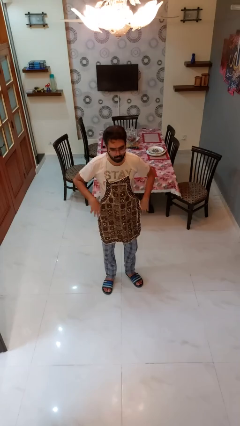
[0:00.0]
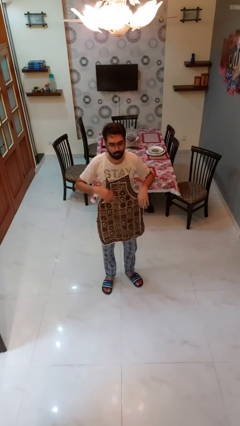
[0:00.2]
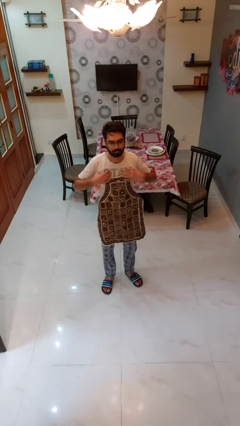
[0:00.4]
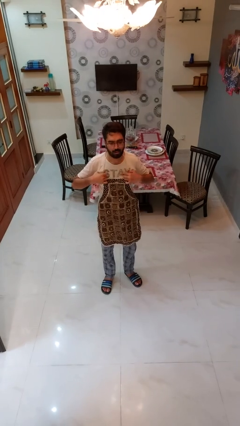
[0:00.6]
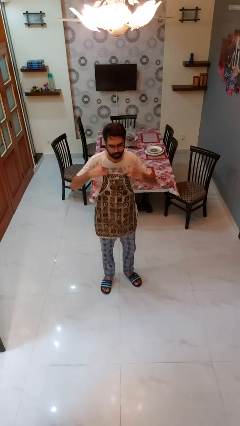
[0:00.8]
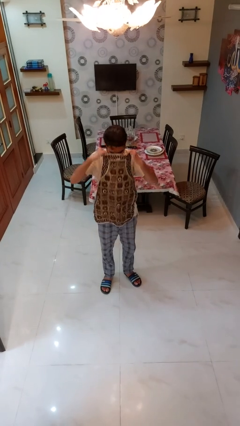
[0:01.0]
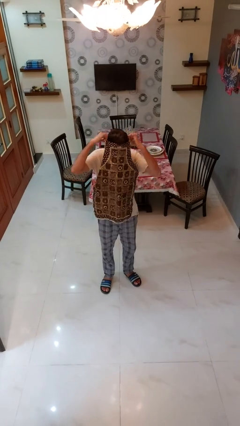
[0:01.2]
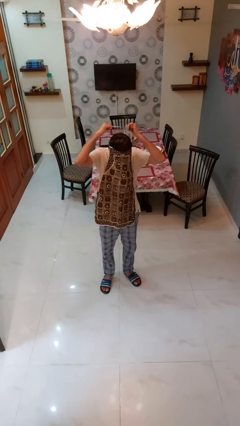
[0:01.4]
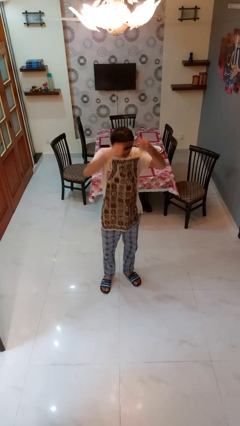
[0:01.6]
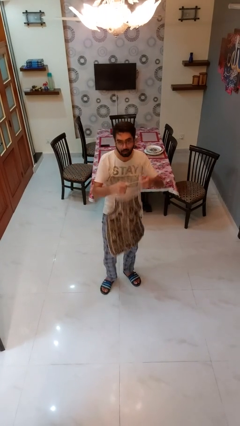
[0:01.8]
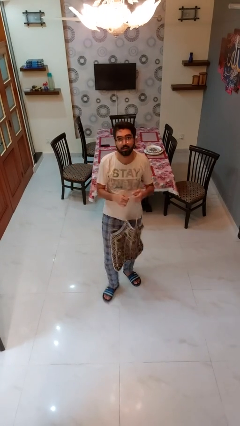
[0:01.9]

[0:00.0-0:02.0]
person takes off apron

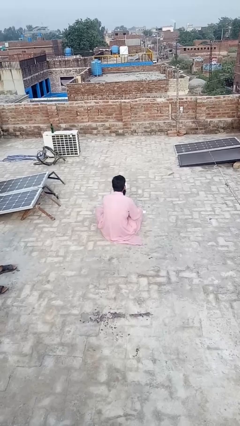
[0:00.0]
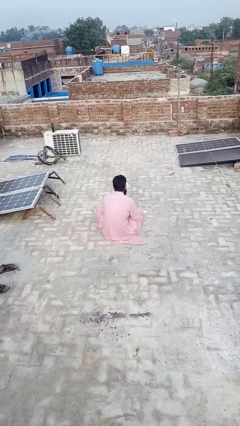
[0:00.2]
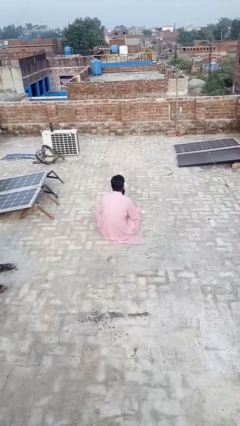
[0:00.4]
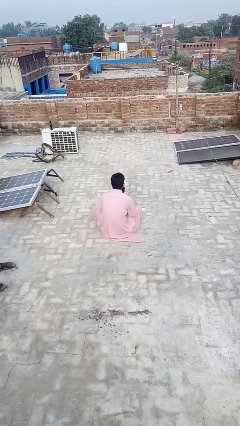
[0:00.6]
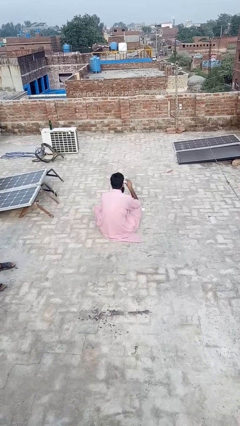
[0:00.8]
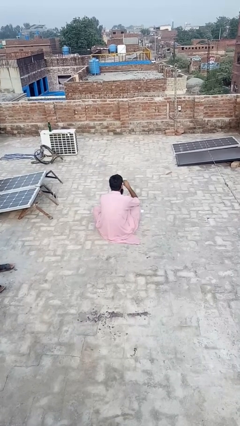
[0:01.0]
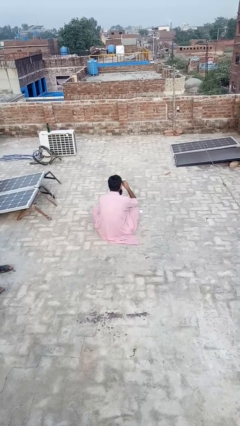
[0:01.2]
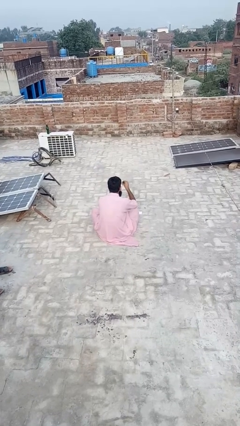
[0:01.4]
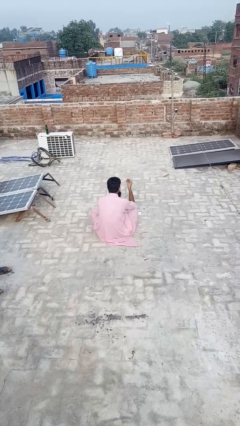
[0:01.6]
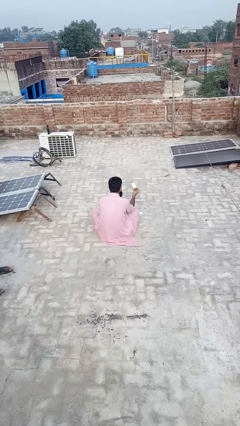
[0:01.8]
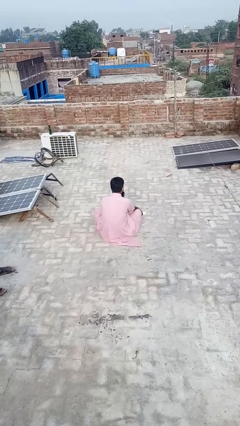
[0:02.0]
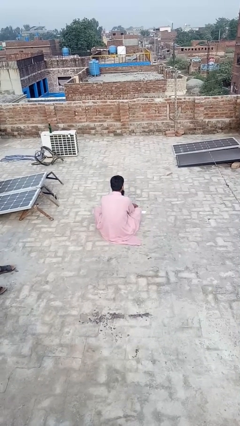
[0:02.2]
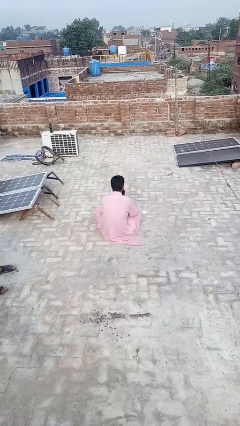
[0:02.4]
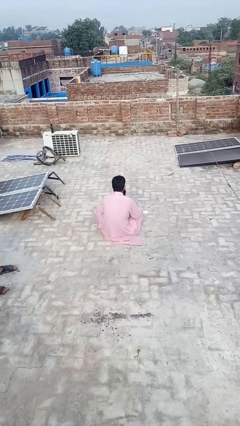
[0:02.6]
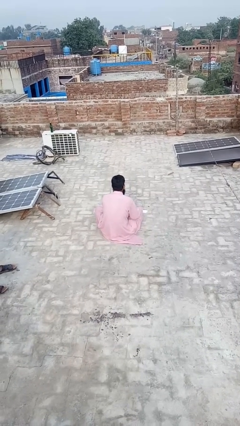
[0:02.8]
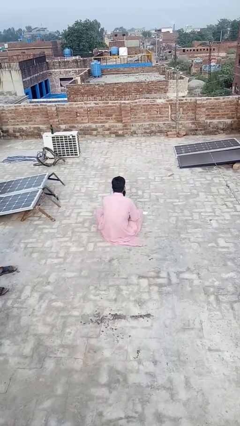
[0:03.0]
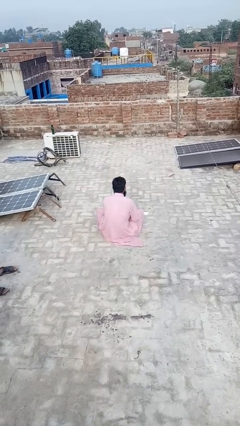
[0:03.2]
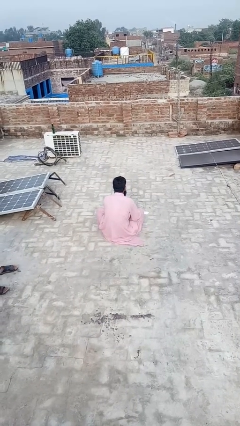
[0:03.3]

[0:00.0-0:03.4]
person discards trash

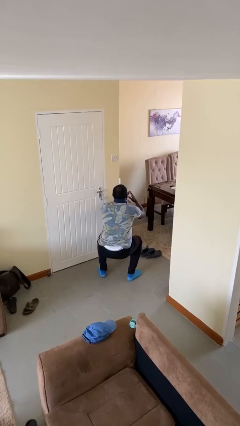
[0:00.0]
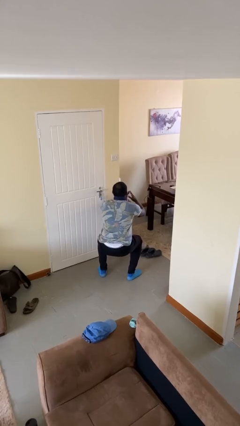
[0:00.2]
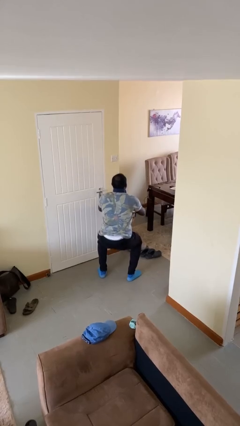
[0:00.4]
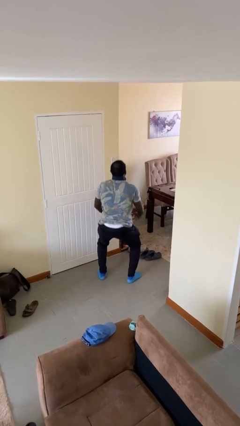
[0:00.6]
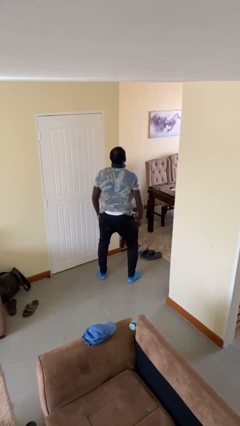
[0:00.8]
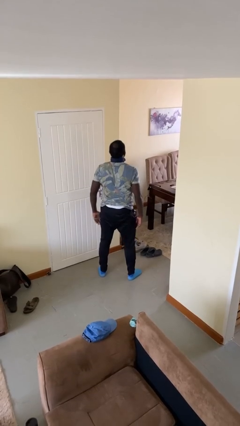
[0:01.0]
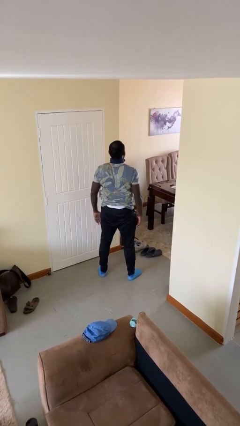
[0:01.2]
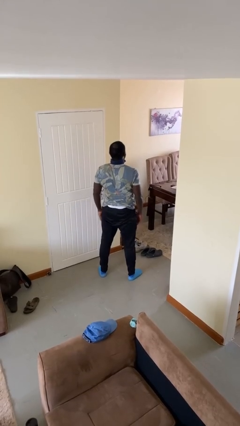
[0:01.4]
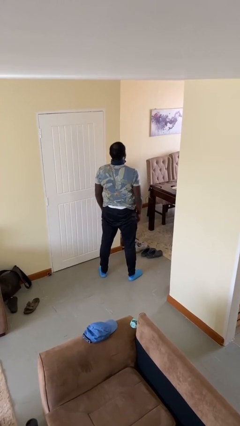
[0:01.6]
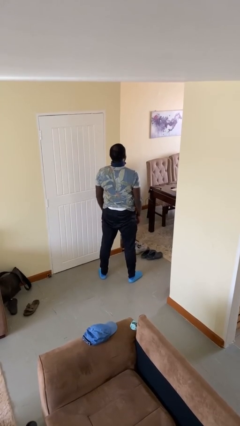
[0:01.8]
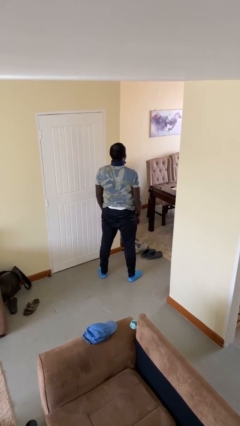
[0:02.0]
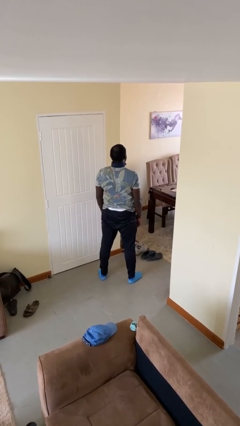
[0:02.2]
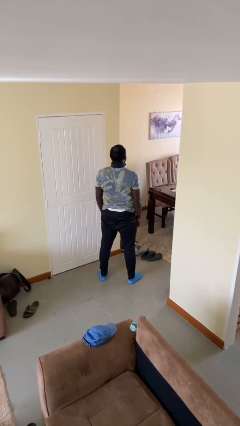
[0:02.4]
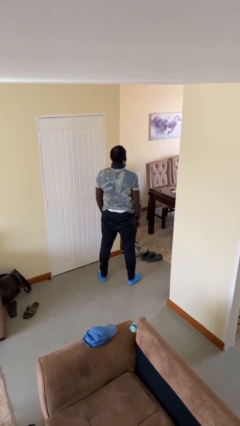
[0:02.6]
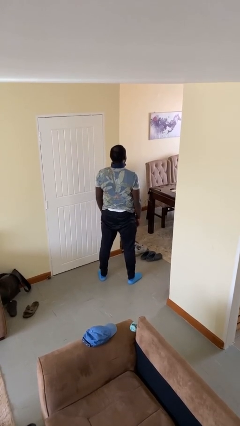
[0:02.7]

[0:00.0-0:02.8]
person stands up

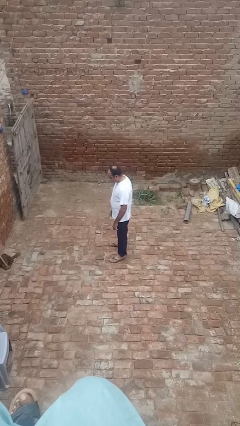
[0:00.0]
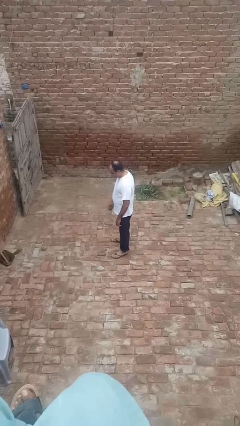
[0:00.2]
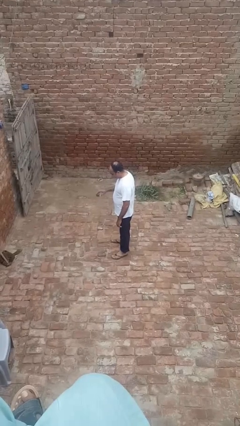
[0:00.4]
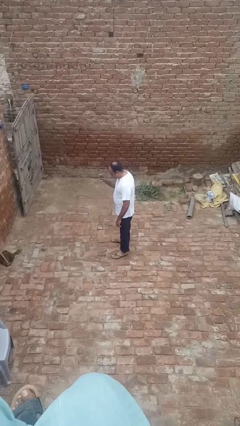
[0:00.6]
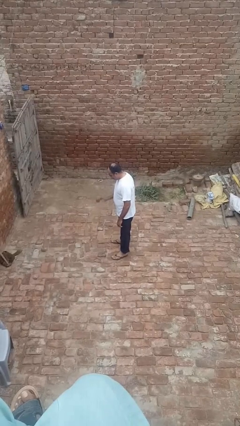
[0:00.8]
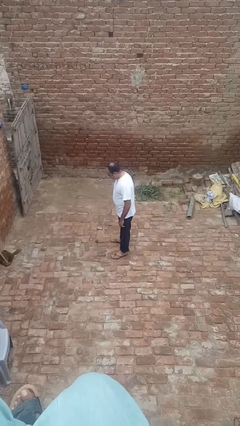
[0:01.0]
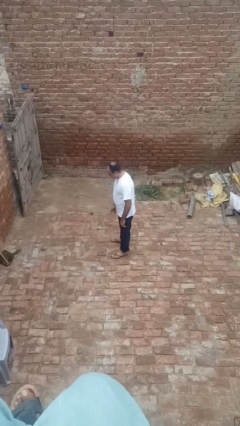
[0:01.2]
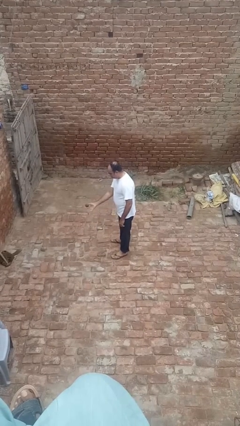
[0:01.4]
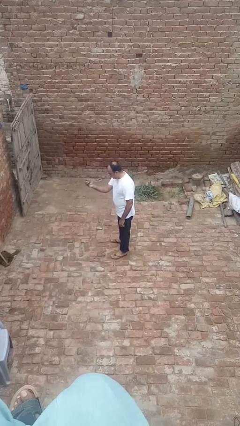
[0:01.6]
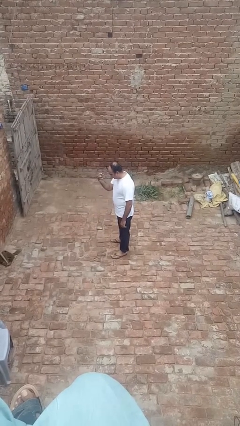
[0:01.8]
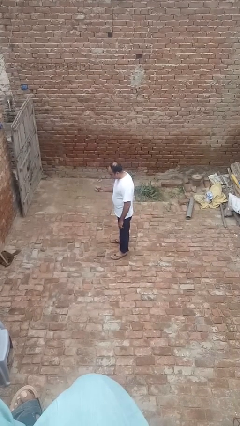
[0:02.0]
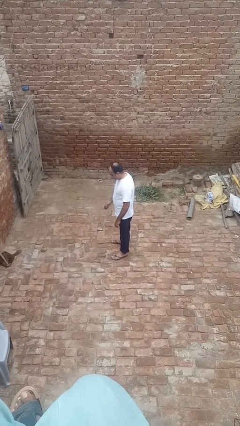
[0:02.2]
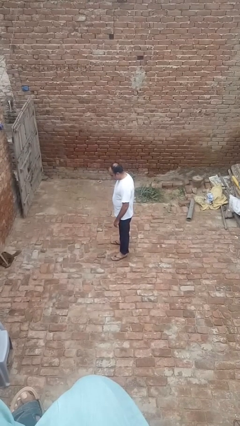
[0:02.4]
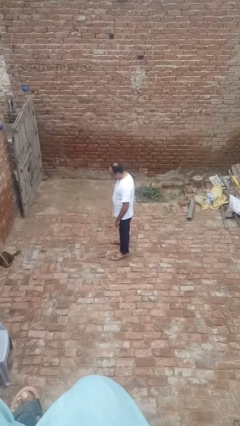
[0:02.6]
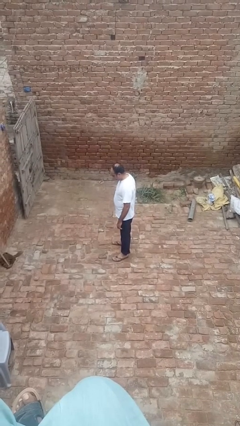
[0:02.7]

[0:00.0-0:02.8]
person bounces ball on floor

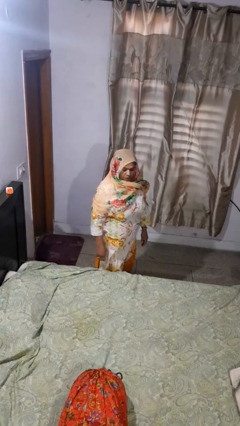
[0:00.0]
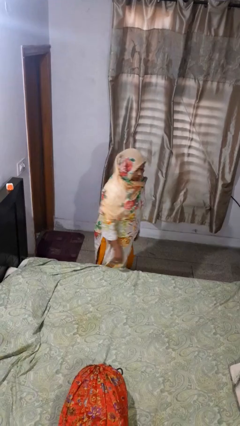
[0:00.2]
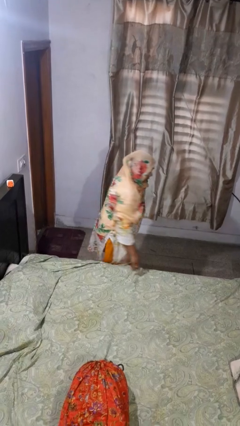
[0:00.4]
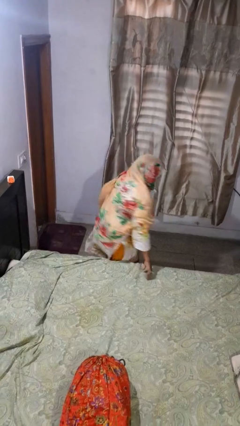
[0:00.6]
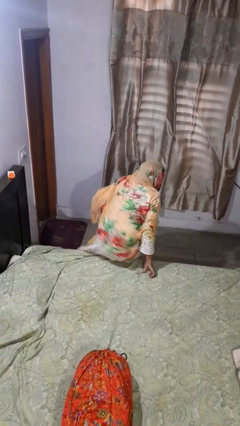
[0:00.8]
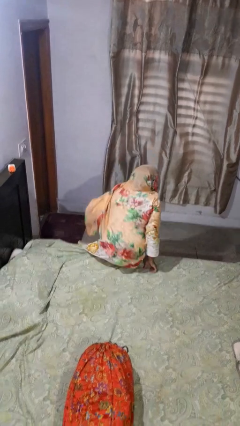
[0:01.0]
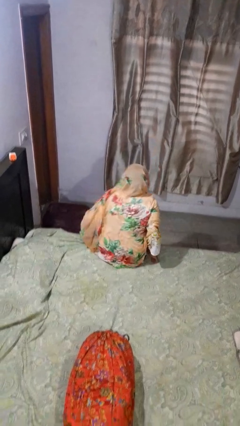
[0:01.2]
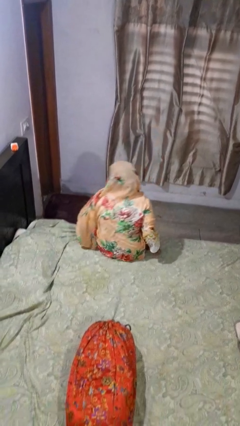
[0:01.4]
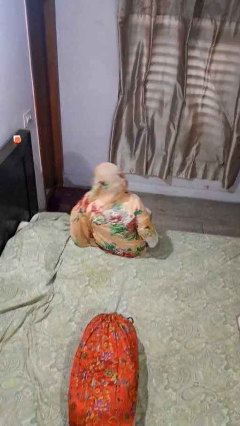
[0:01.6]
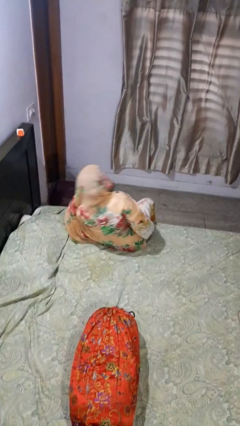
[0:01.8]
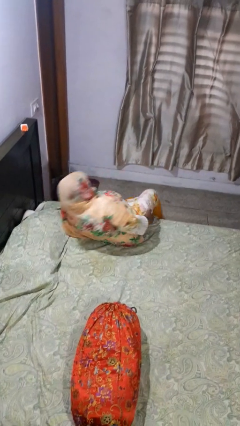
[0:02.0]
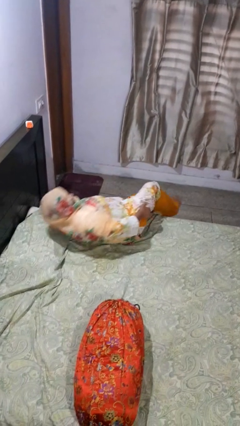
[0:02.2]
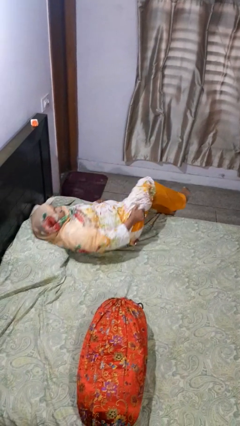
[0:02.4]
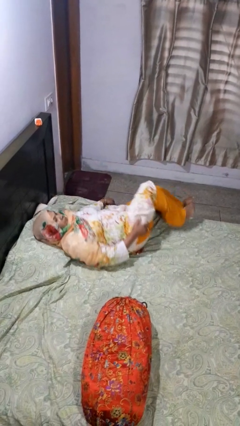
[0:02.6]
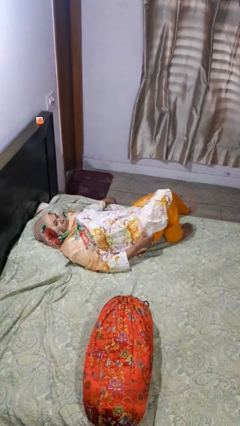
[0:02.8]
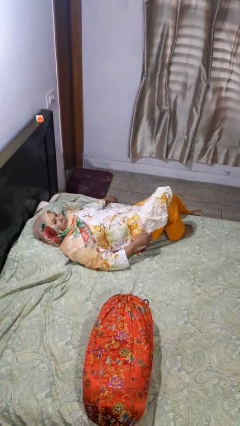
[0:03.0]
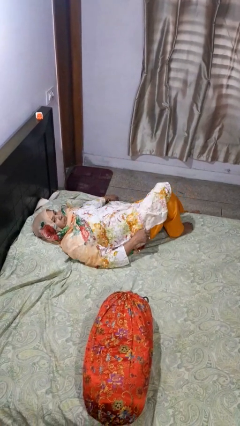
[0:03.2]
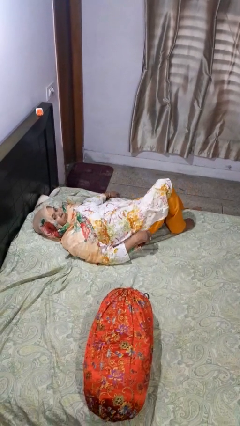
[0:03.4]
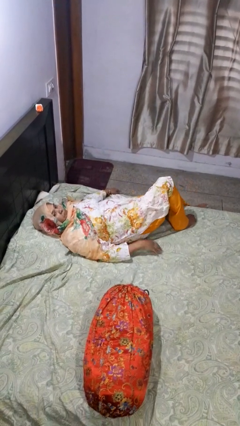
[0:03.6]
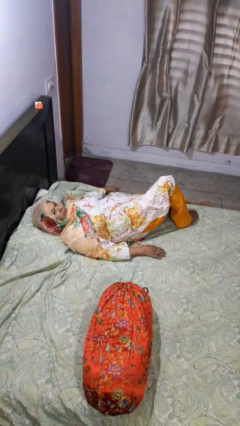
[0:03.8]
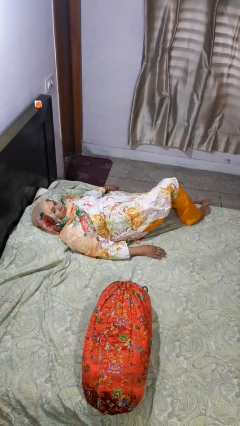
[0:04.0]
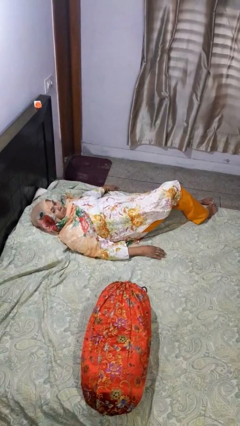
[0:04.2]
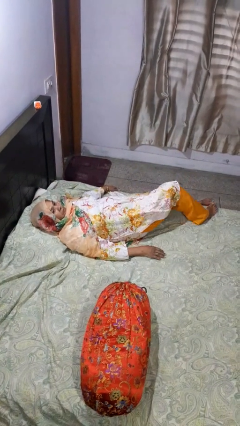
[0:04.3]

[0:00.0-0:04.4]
person lies down on bed

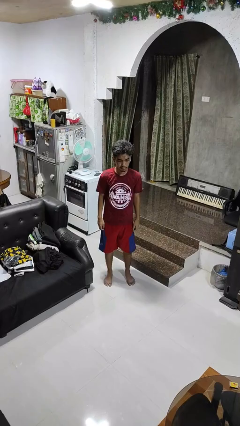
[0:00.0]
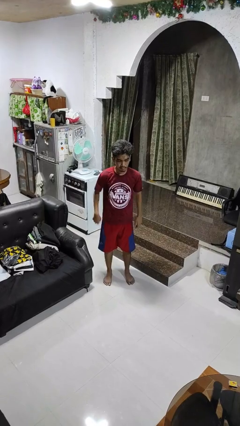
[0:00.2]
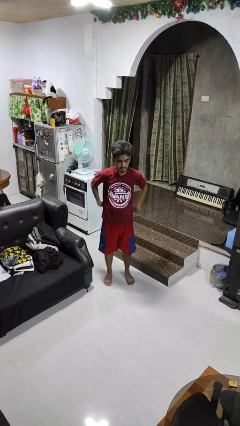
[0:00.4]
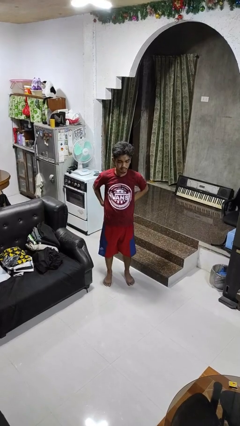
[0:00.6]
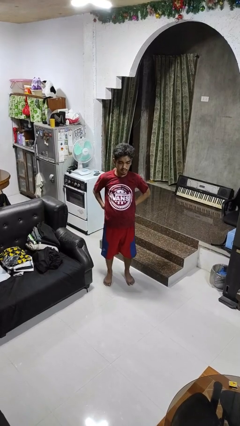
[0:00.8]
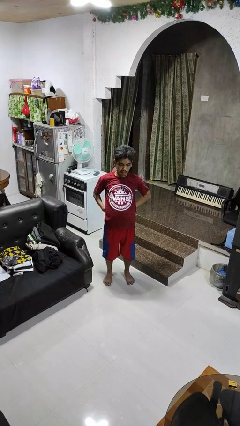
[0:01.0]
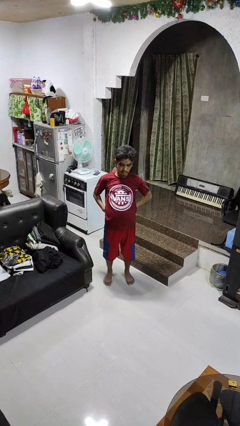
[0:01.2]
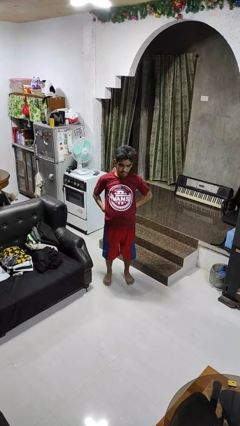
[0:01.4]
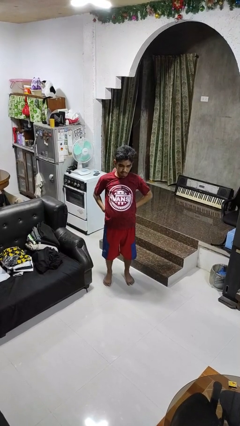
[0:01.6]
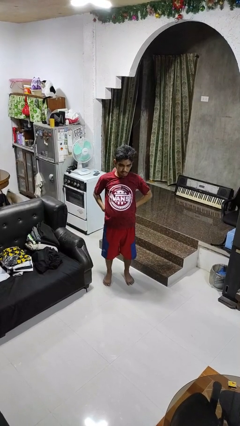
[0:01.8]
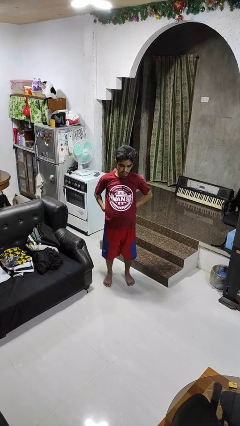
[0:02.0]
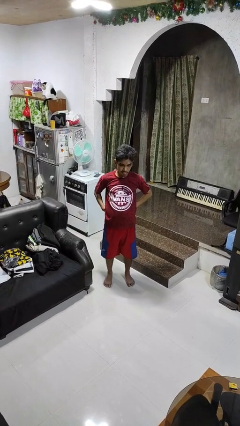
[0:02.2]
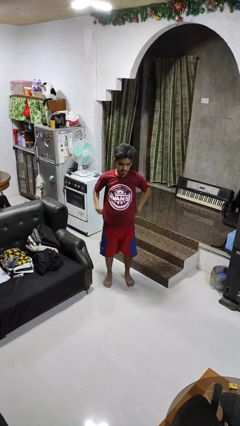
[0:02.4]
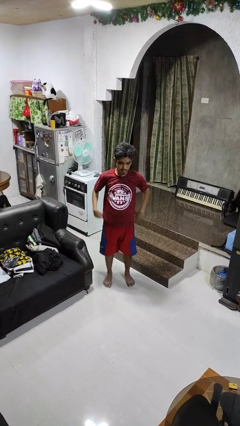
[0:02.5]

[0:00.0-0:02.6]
person stretches back
